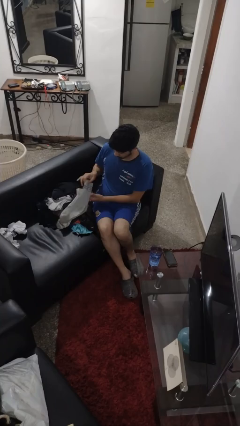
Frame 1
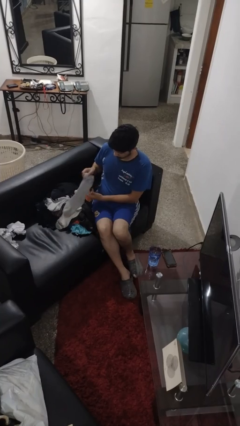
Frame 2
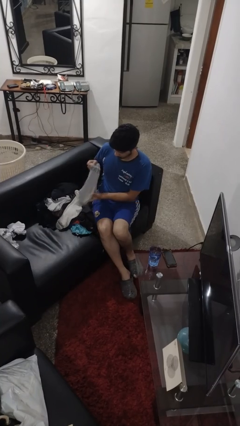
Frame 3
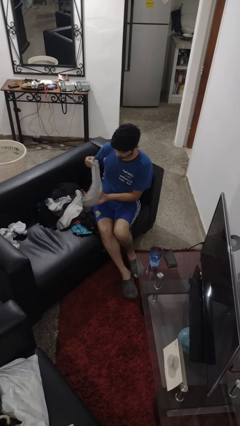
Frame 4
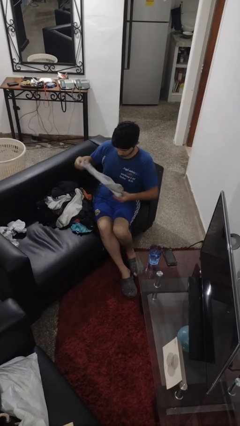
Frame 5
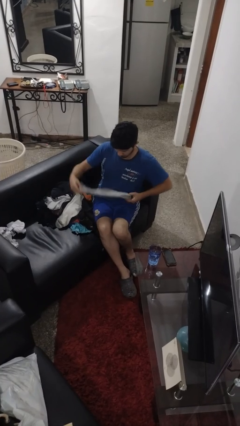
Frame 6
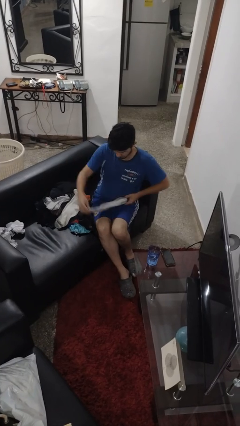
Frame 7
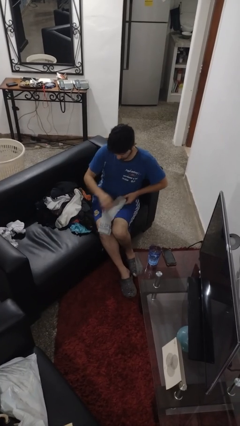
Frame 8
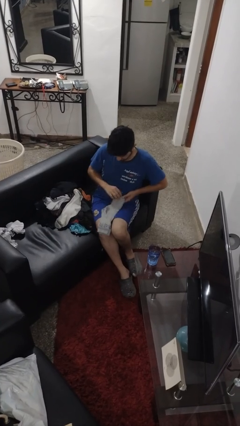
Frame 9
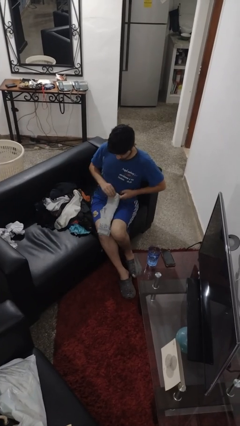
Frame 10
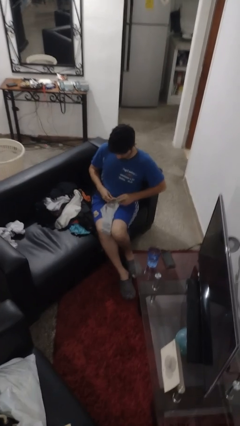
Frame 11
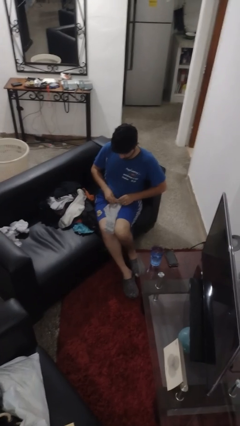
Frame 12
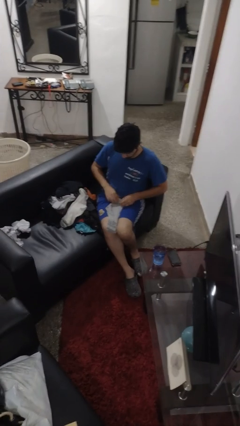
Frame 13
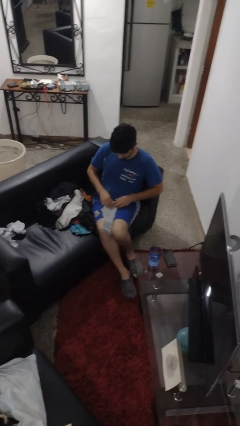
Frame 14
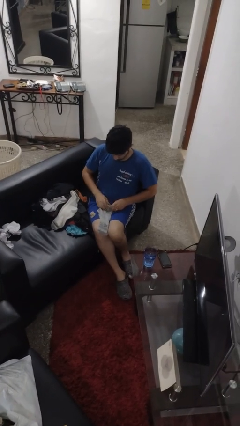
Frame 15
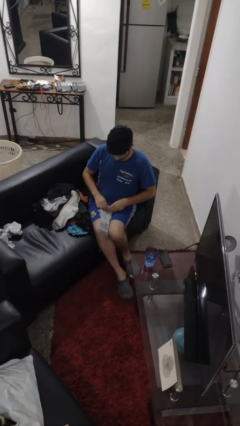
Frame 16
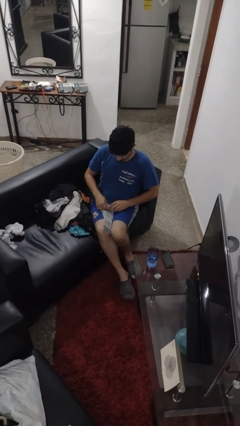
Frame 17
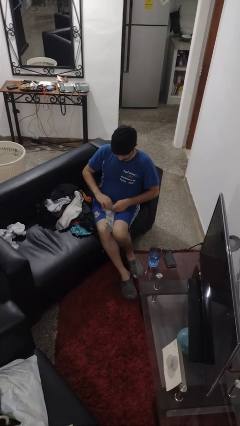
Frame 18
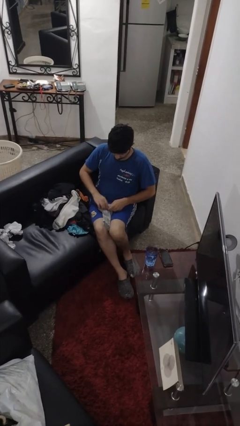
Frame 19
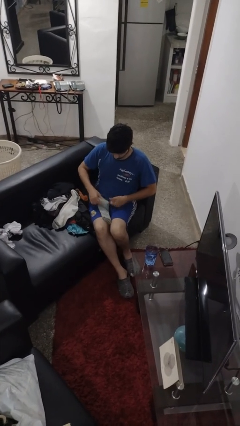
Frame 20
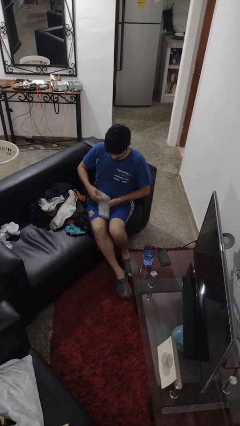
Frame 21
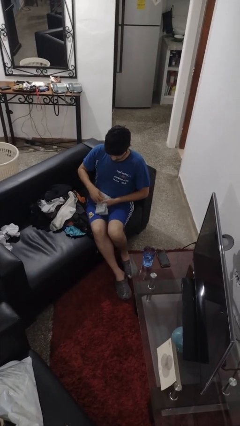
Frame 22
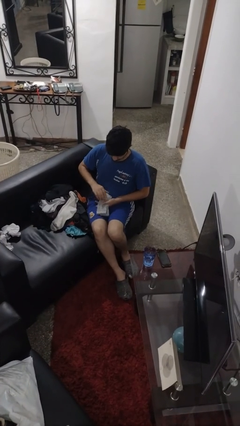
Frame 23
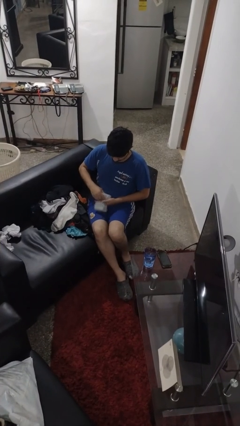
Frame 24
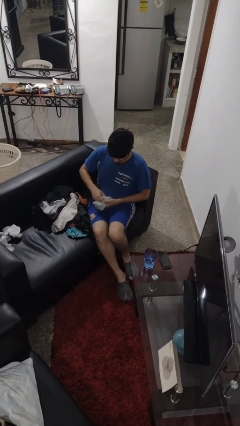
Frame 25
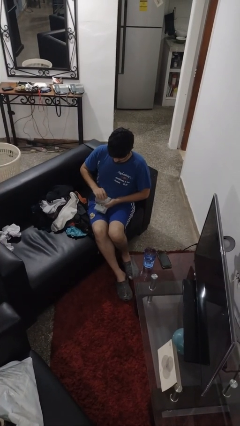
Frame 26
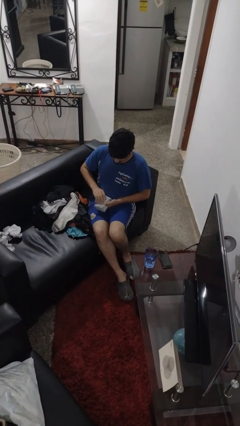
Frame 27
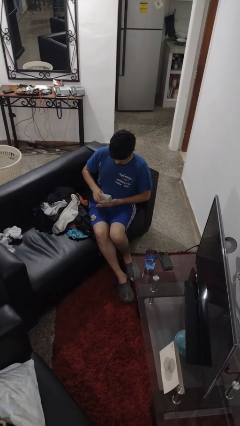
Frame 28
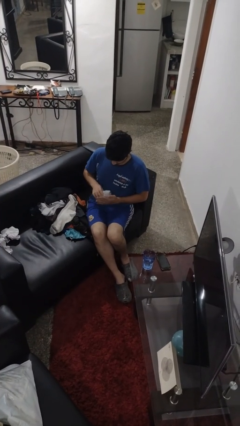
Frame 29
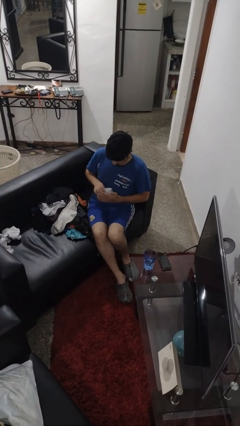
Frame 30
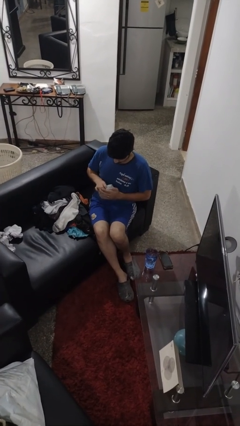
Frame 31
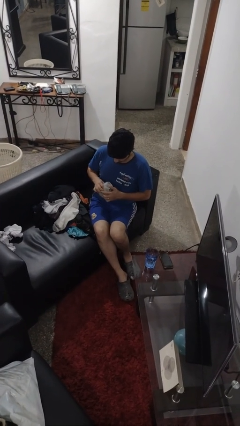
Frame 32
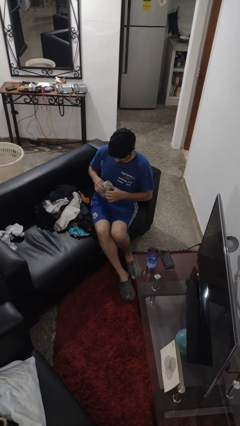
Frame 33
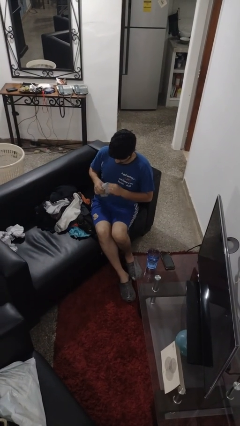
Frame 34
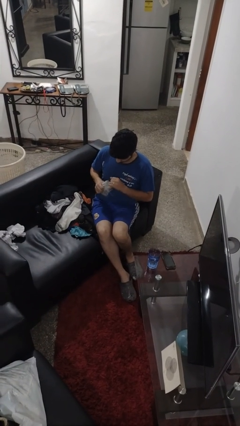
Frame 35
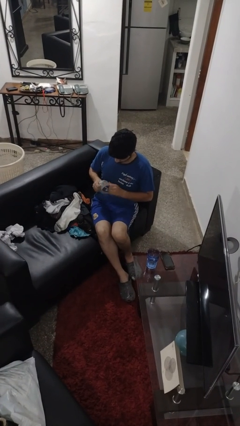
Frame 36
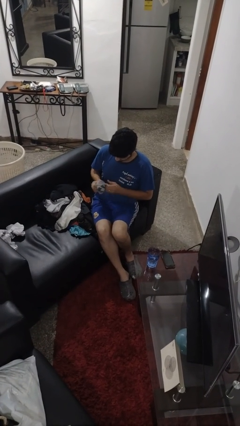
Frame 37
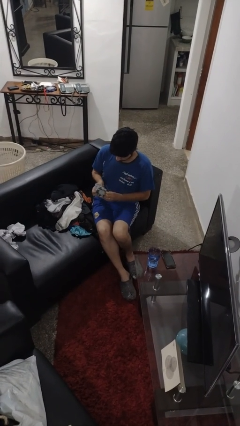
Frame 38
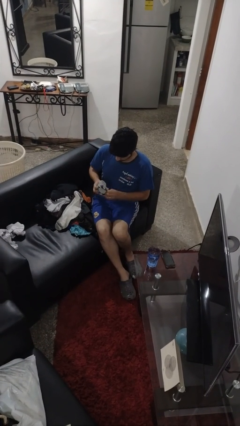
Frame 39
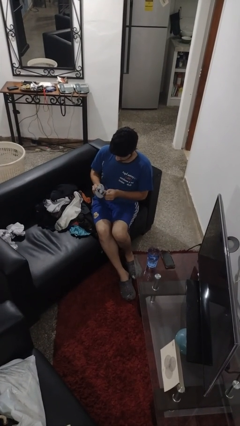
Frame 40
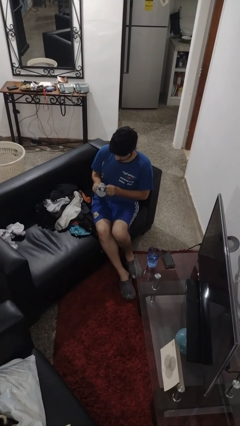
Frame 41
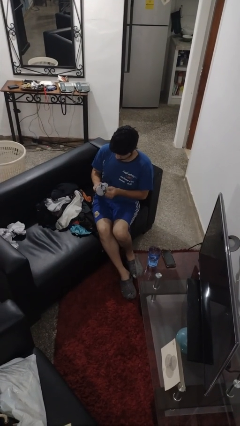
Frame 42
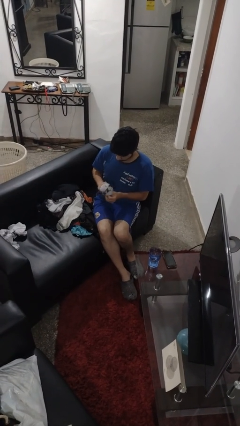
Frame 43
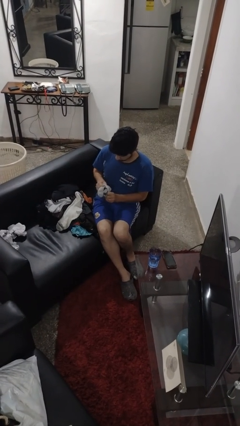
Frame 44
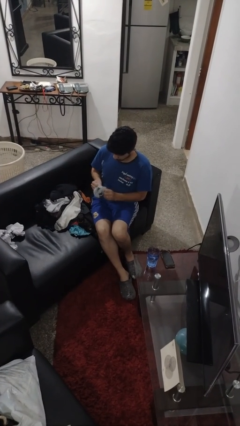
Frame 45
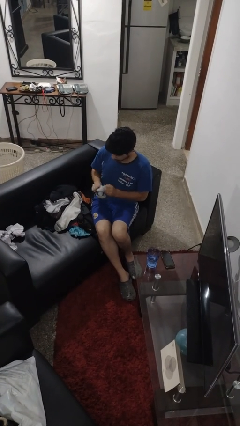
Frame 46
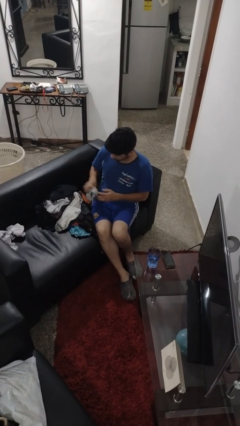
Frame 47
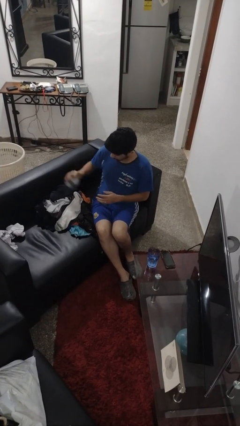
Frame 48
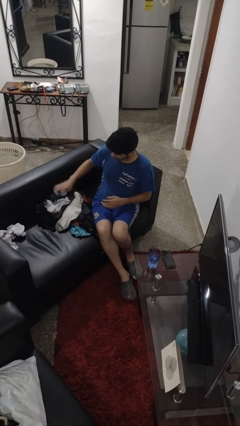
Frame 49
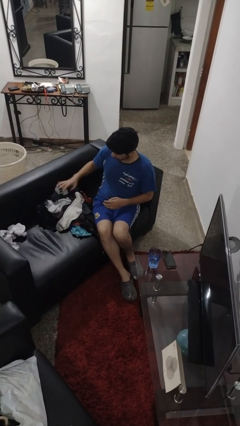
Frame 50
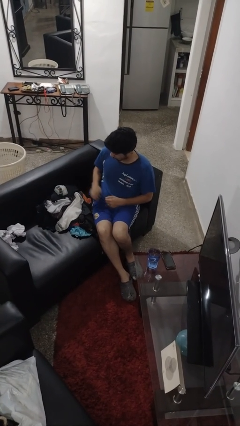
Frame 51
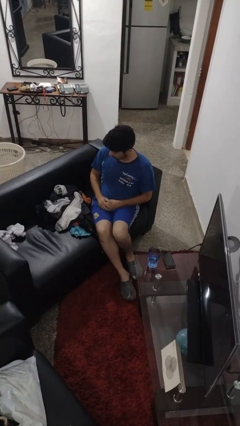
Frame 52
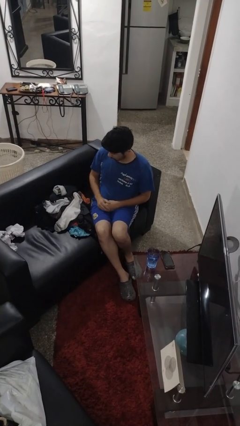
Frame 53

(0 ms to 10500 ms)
person folds socks

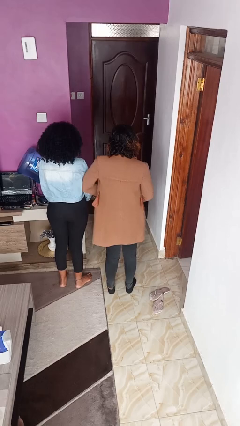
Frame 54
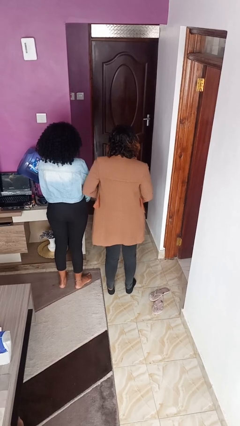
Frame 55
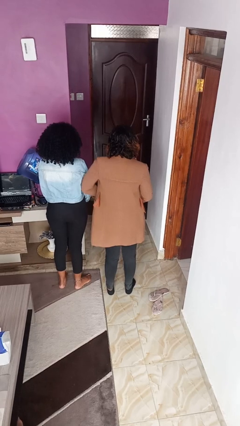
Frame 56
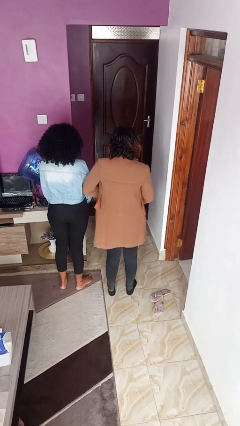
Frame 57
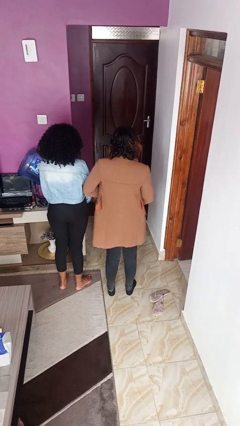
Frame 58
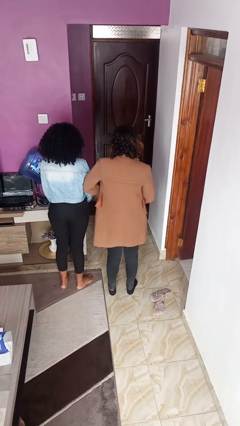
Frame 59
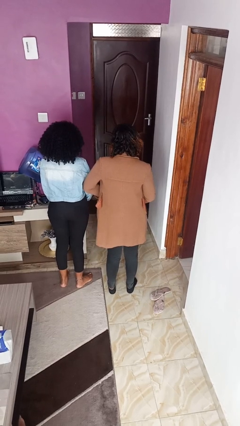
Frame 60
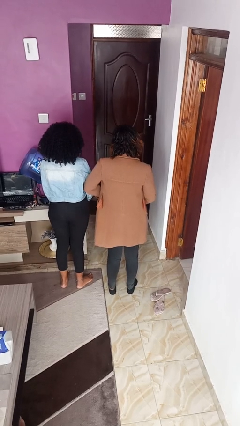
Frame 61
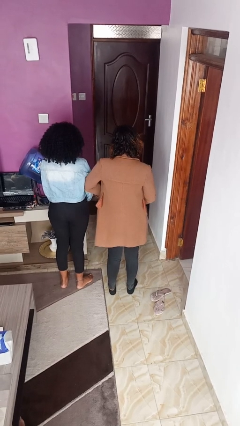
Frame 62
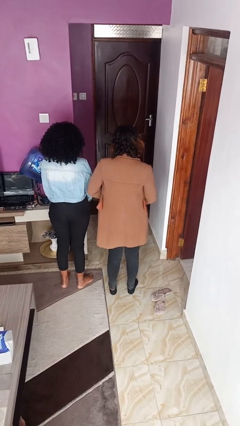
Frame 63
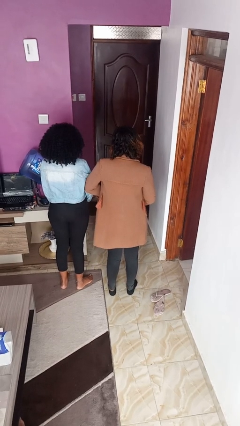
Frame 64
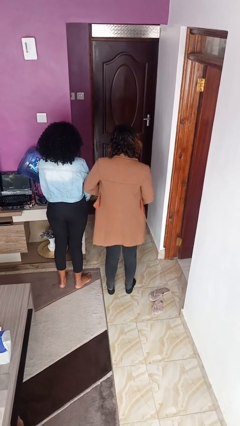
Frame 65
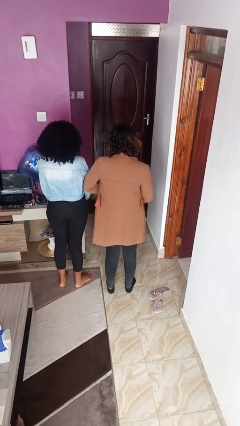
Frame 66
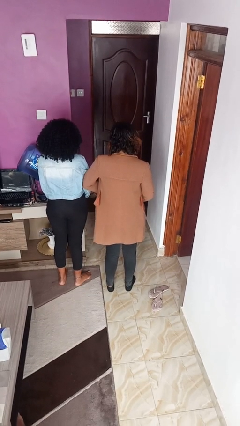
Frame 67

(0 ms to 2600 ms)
person nudges person with elbow

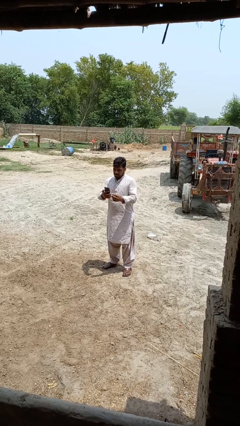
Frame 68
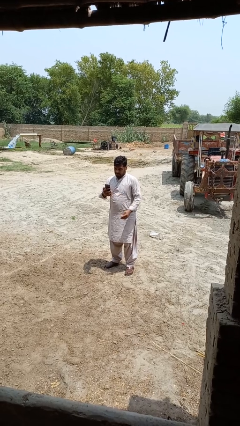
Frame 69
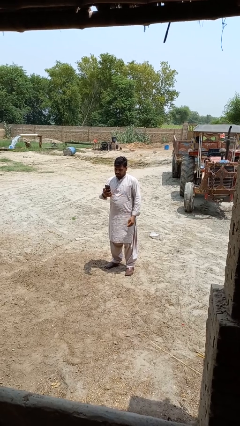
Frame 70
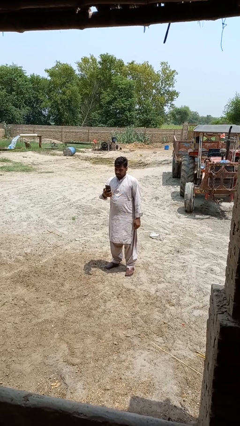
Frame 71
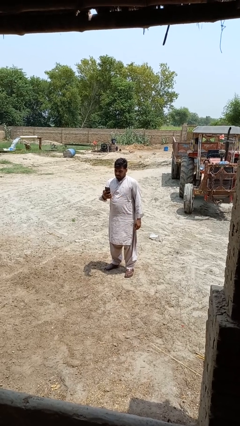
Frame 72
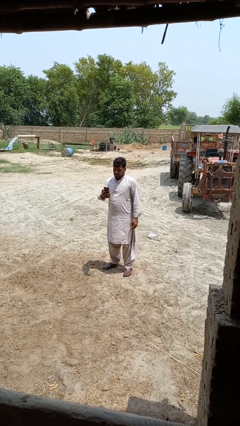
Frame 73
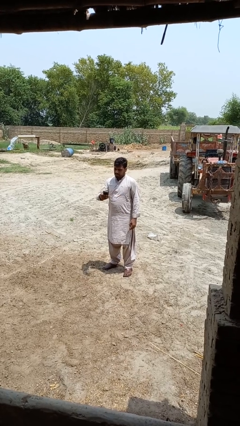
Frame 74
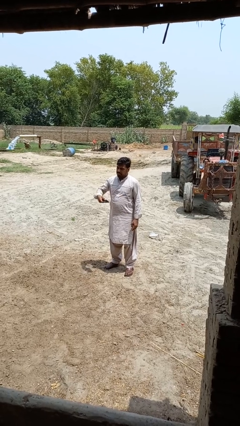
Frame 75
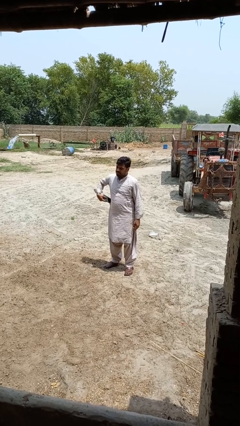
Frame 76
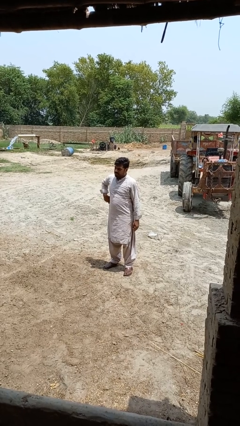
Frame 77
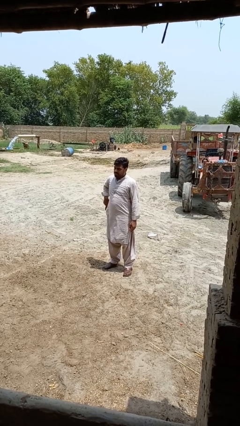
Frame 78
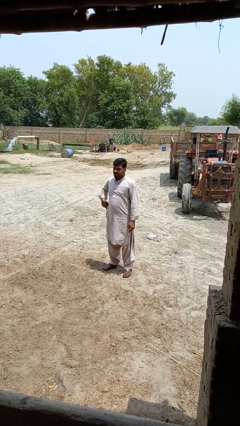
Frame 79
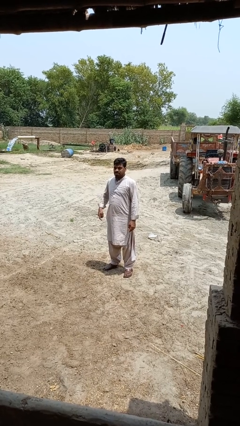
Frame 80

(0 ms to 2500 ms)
person puts phone into pocket

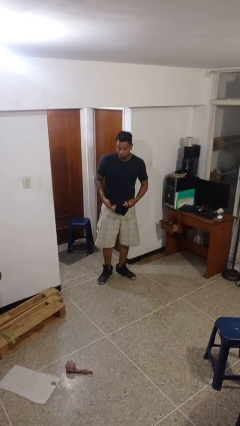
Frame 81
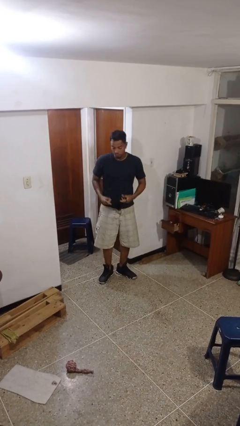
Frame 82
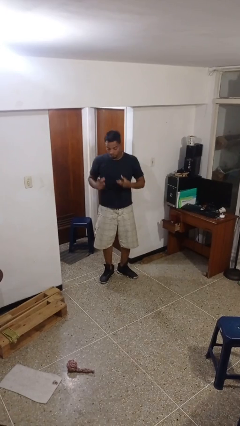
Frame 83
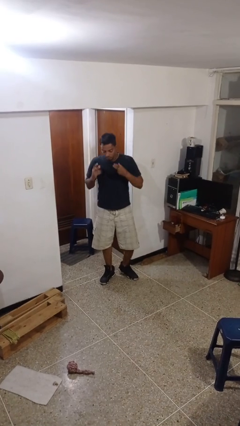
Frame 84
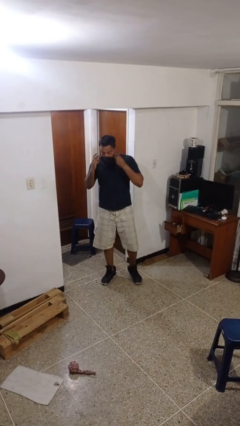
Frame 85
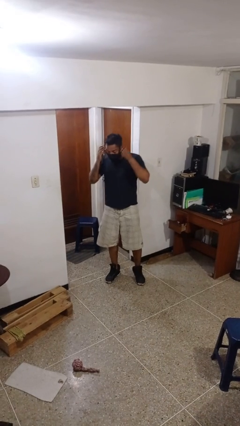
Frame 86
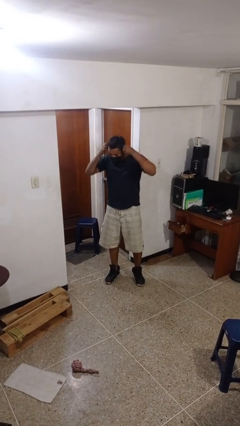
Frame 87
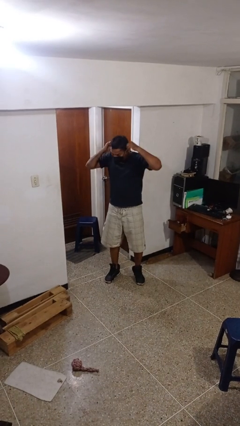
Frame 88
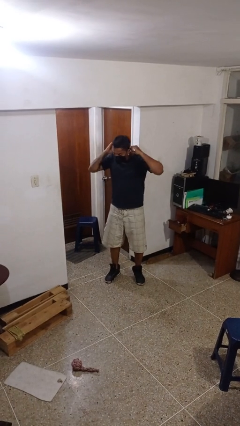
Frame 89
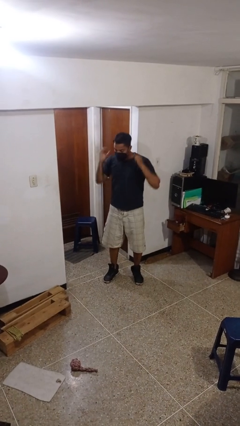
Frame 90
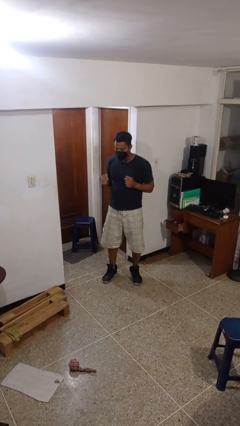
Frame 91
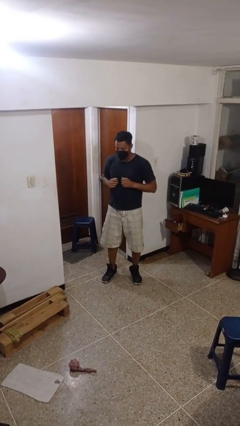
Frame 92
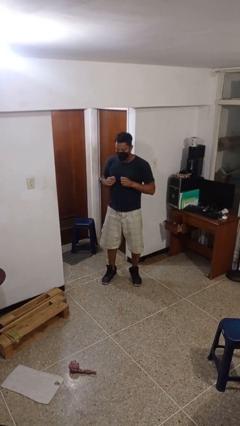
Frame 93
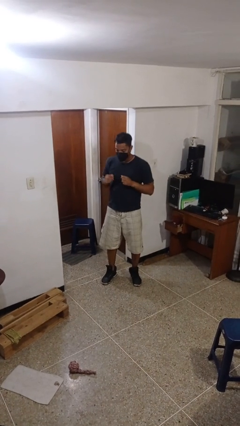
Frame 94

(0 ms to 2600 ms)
person puts on facemask
